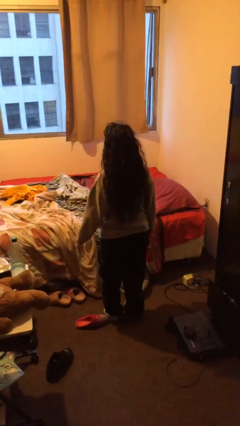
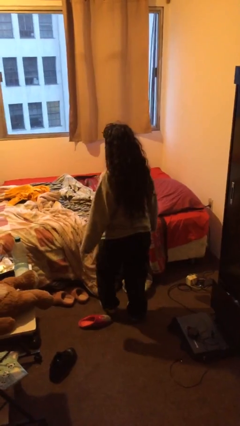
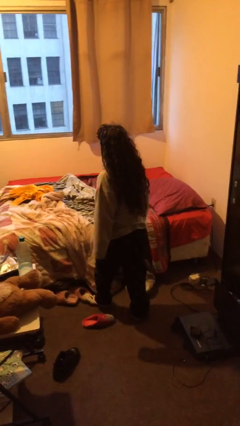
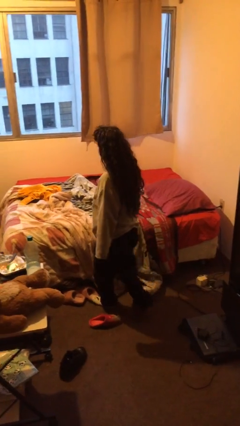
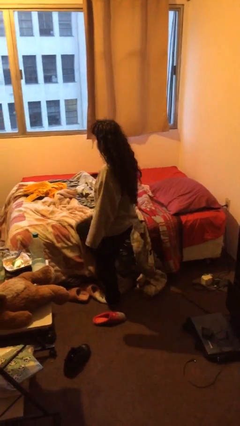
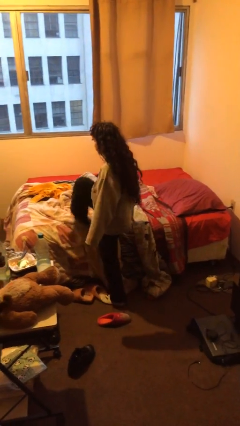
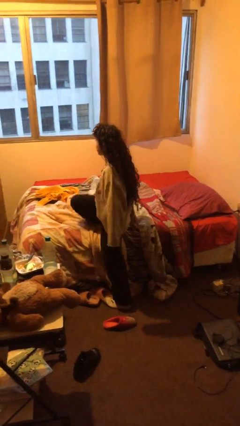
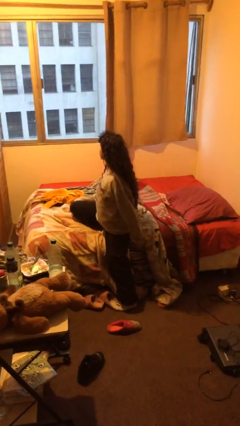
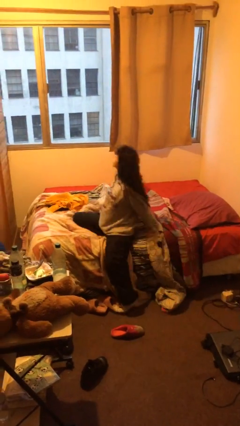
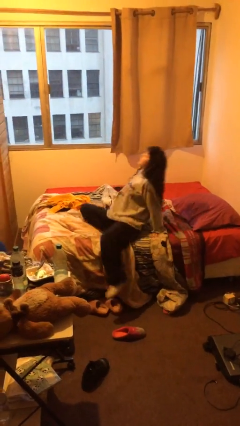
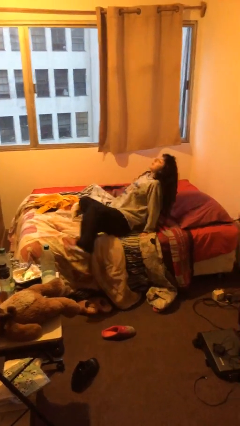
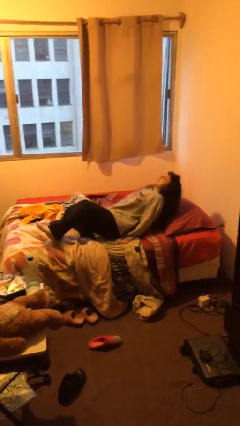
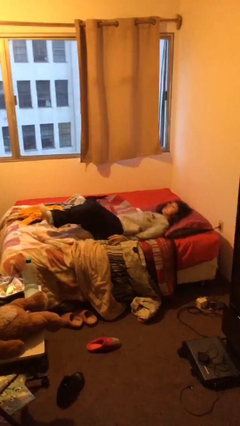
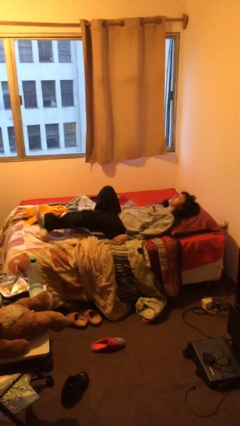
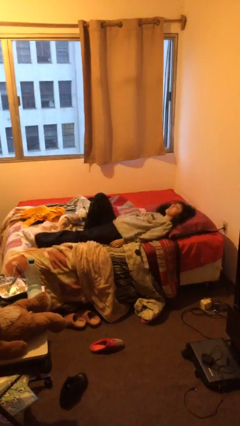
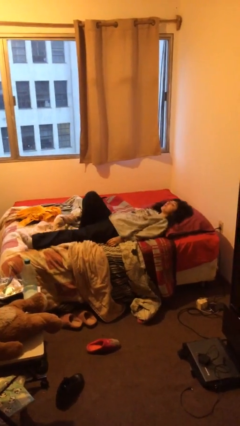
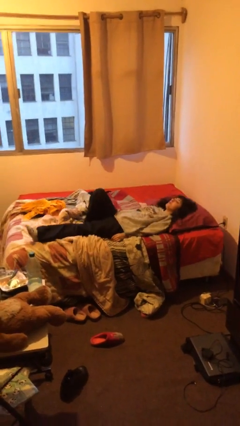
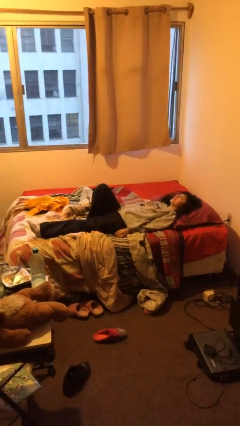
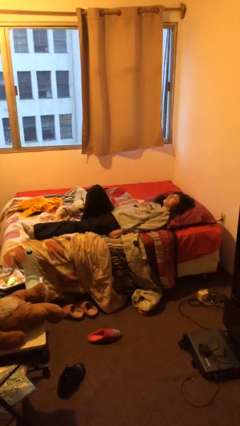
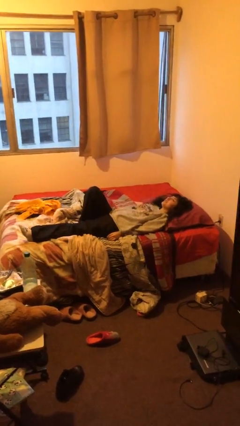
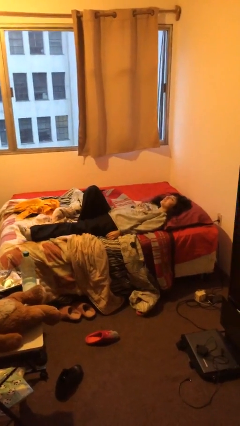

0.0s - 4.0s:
person lies down on bed

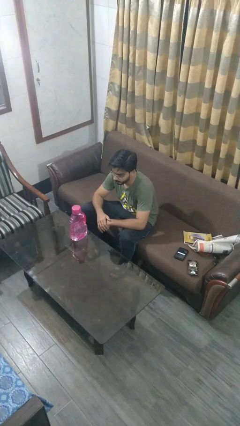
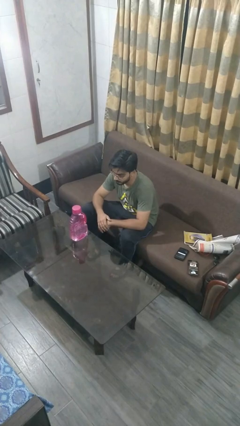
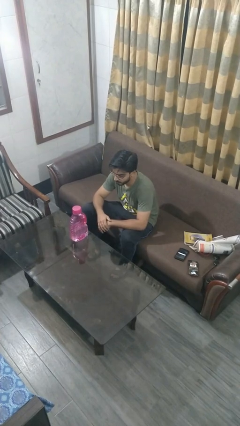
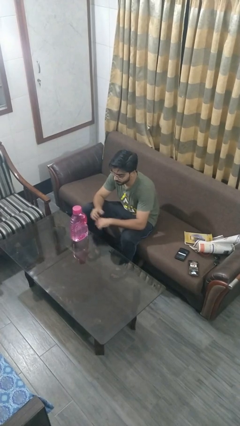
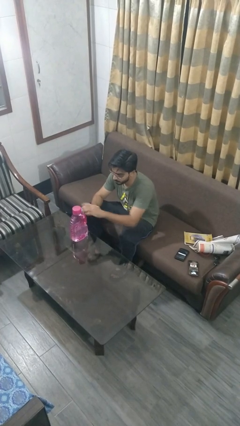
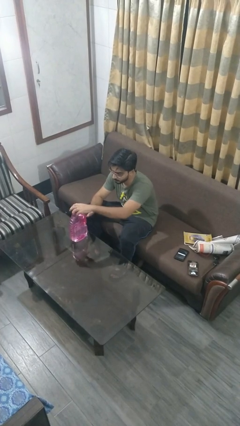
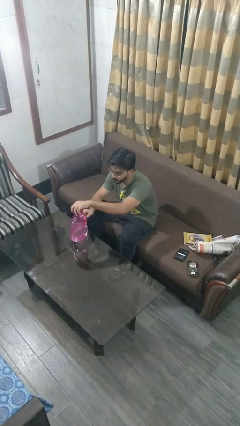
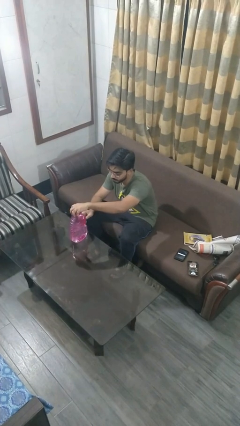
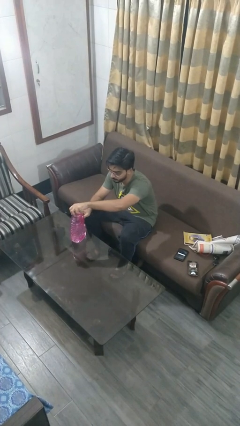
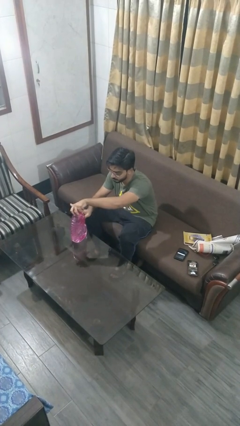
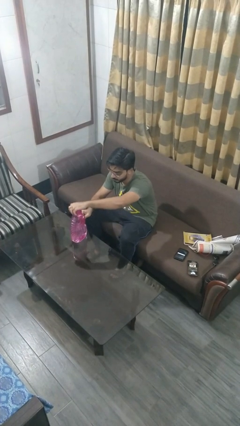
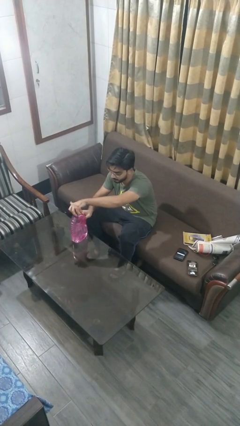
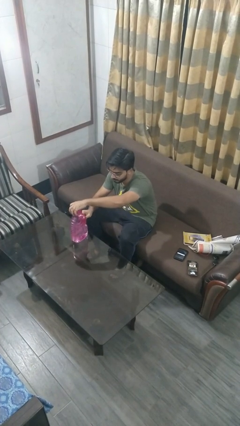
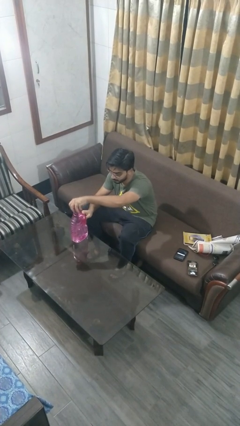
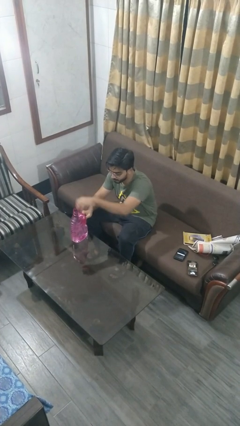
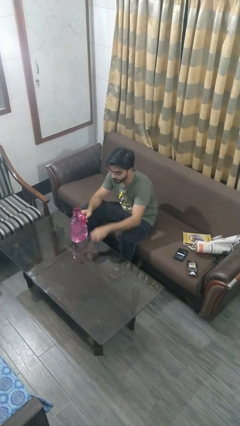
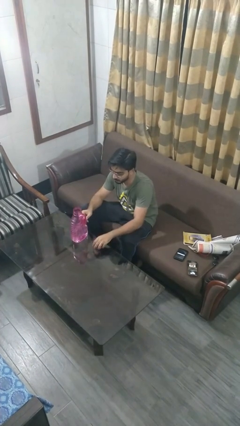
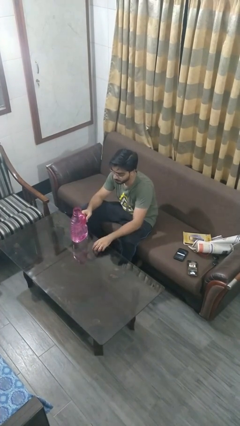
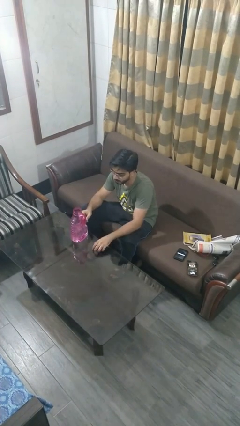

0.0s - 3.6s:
person unscrews lid from bottle

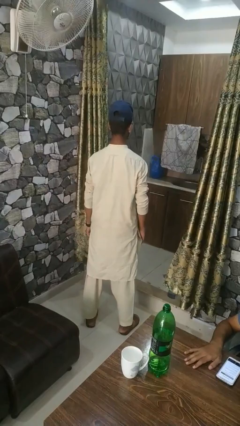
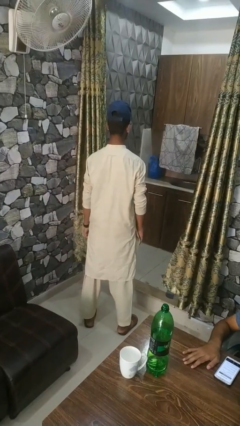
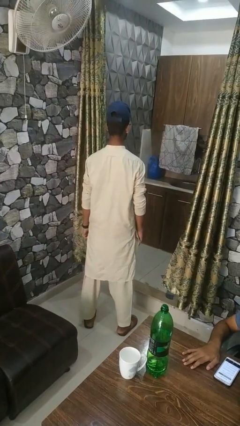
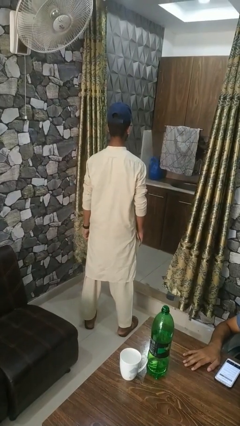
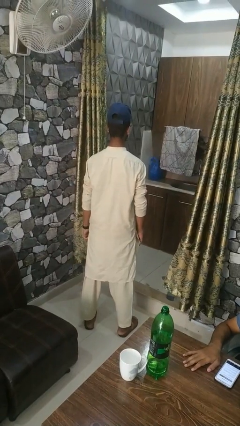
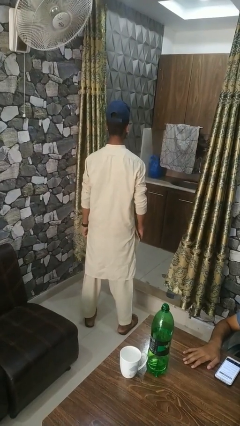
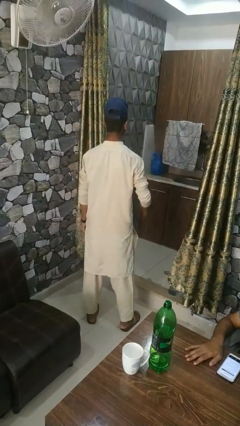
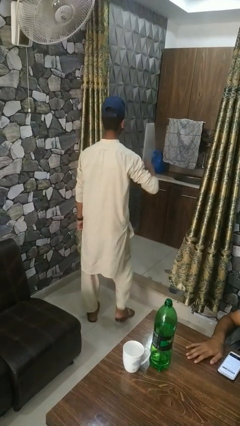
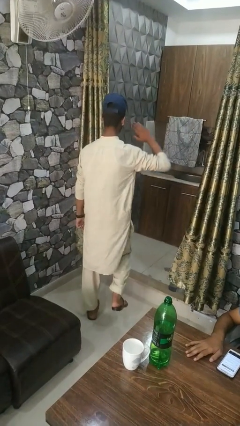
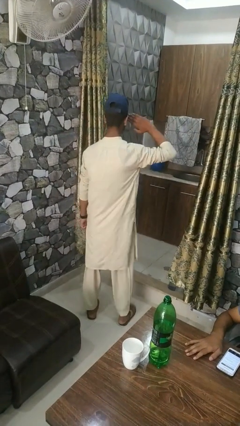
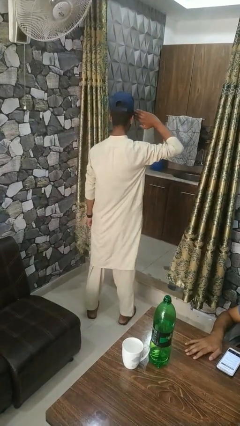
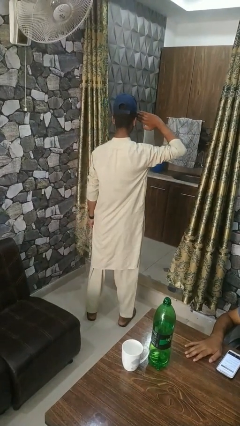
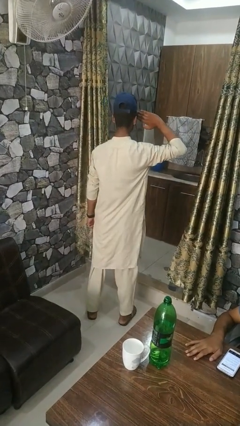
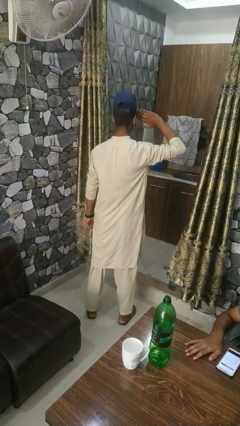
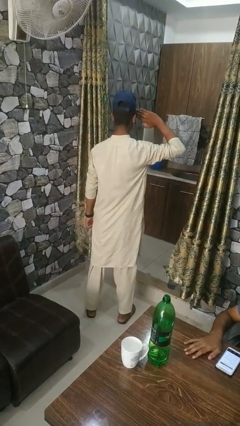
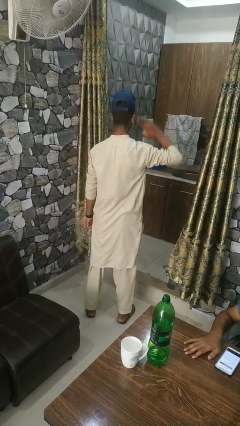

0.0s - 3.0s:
person salutes

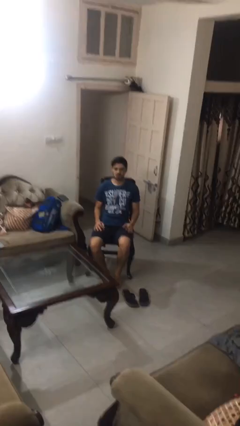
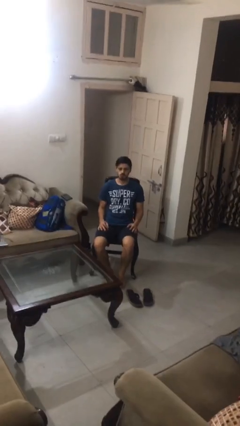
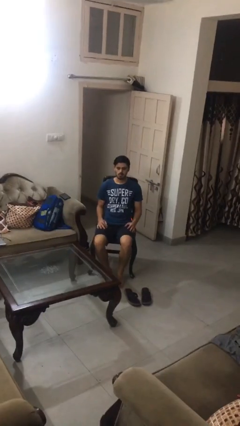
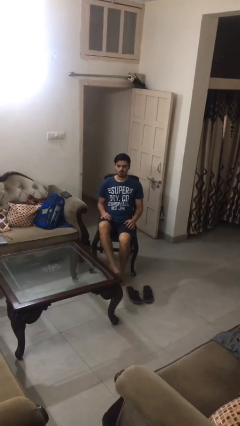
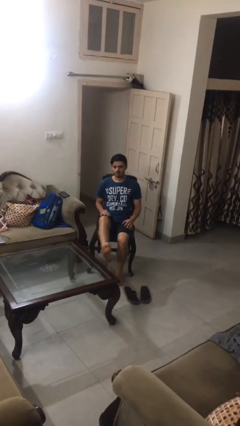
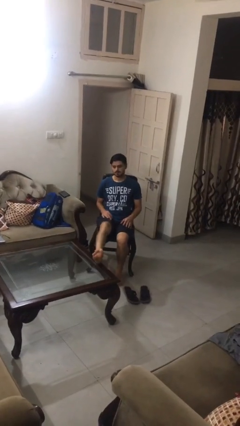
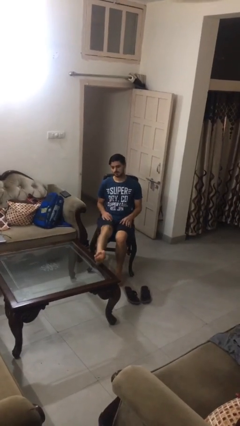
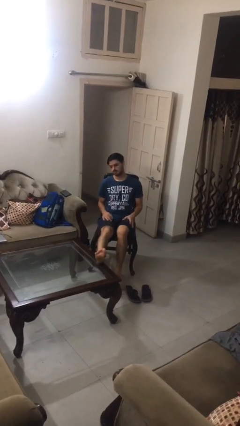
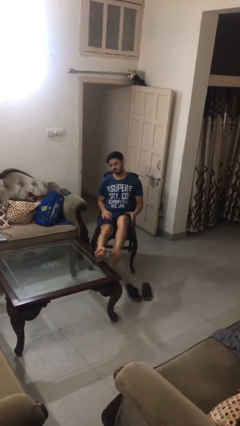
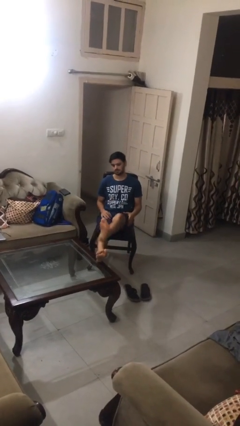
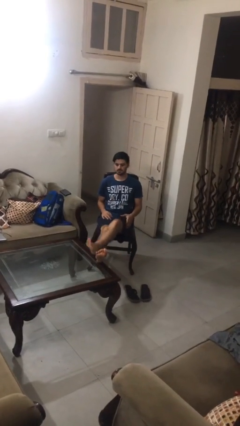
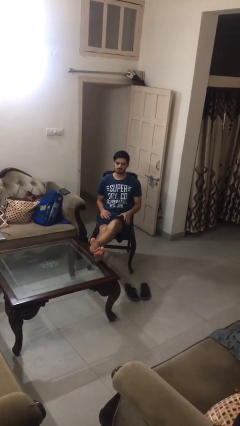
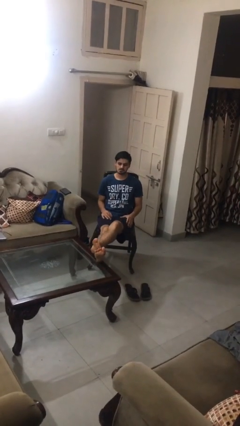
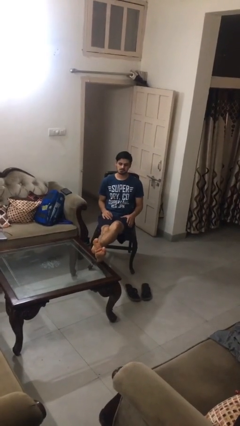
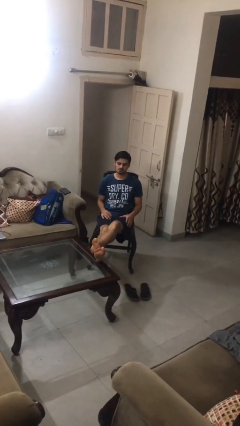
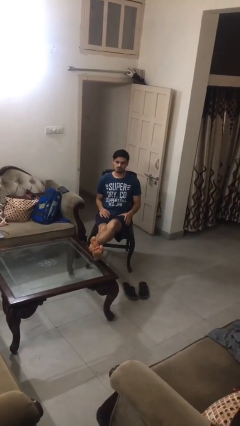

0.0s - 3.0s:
person puts feet up

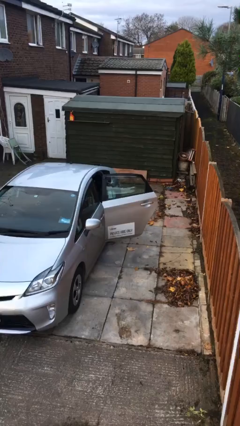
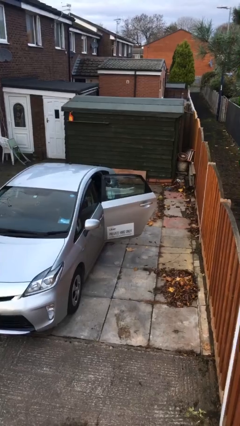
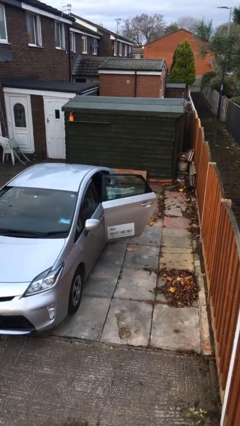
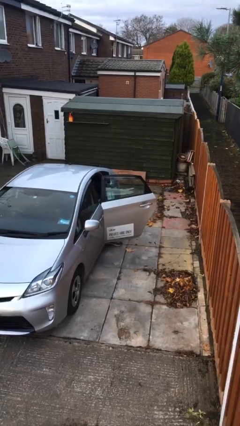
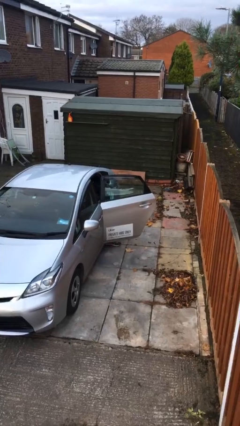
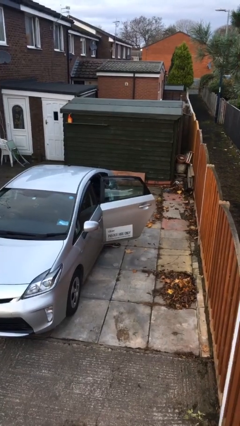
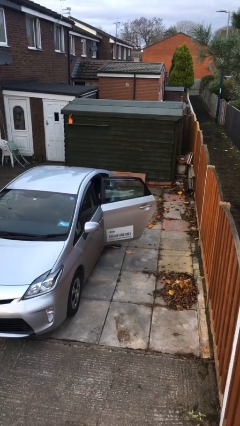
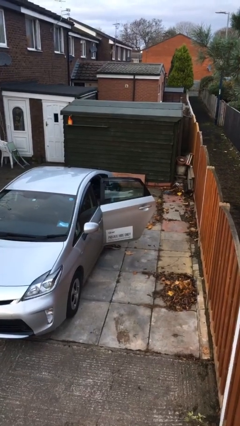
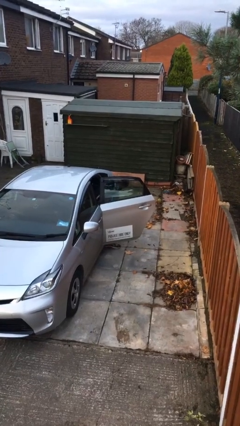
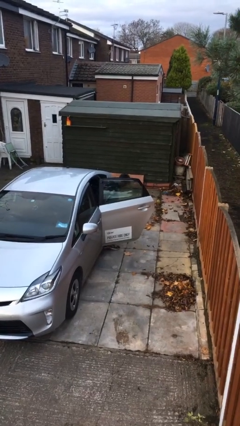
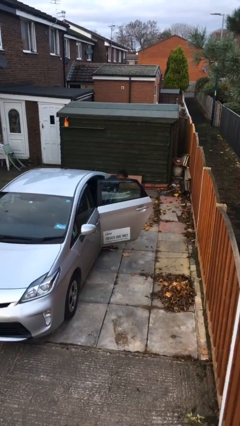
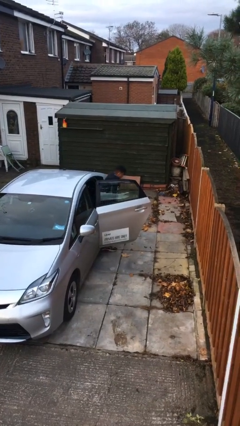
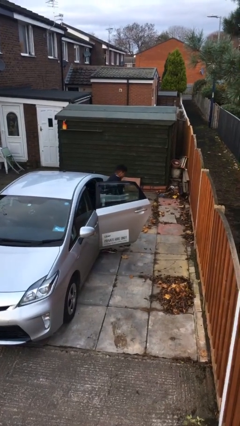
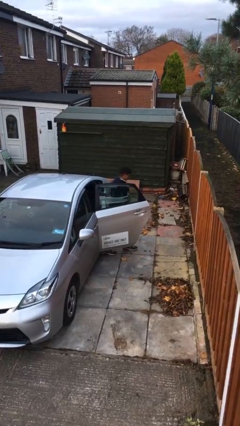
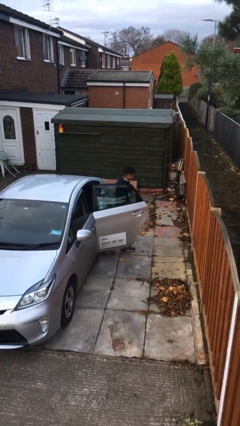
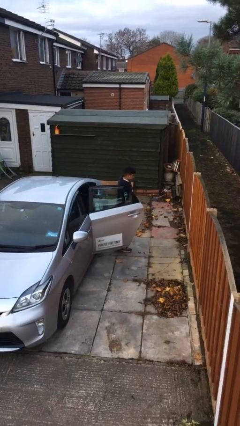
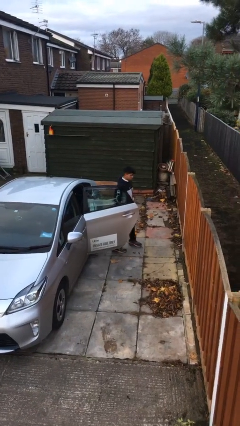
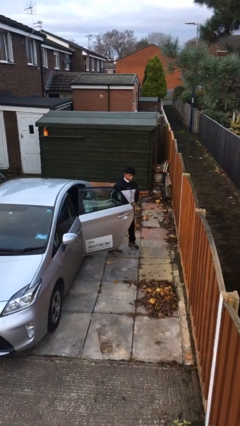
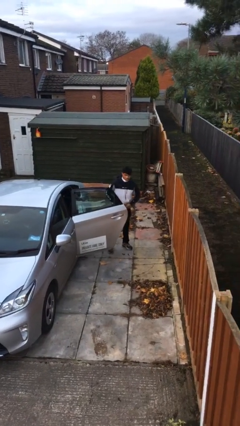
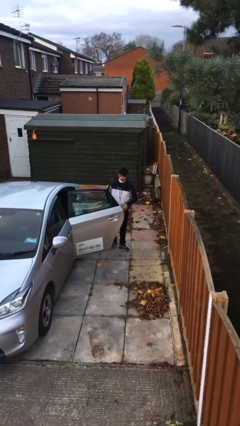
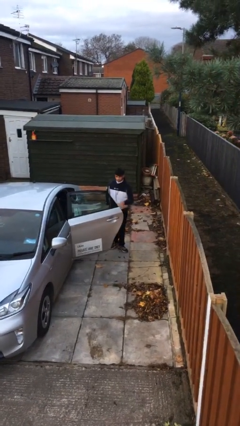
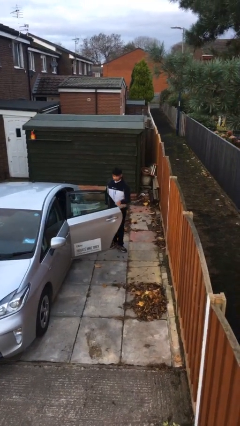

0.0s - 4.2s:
person exits car
